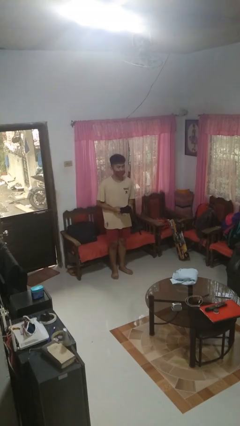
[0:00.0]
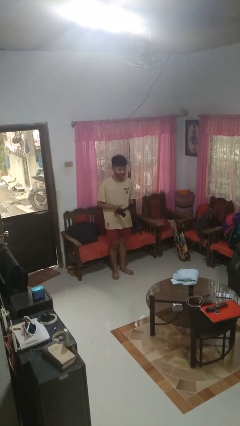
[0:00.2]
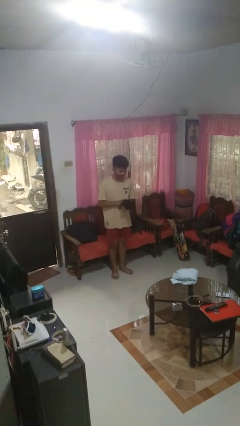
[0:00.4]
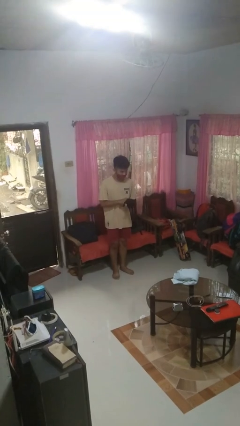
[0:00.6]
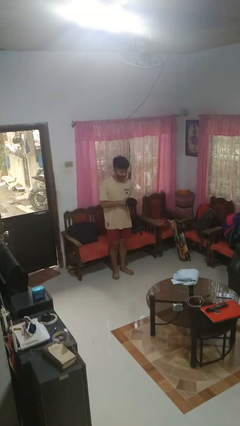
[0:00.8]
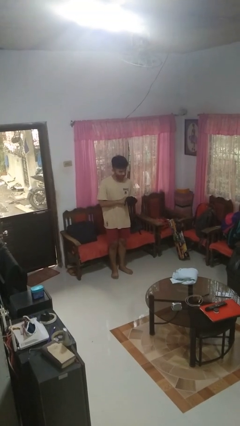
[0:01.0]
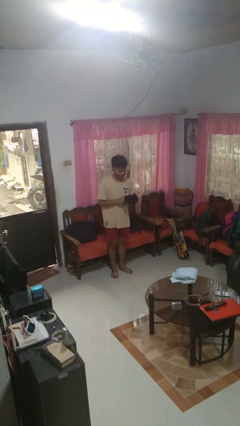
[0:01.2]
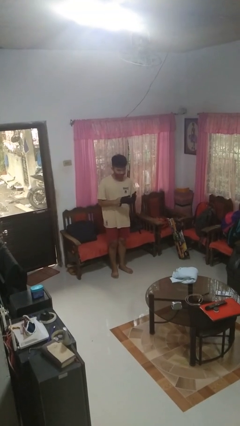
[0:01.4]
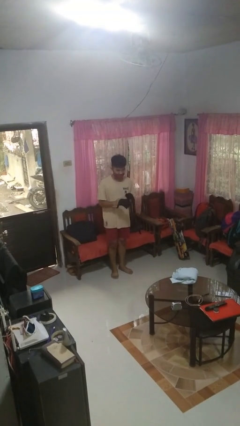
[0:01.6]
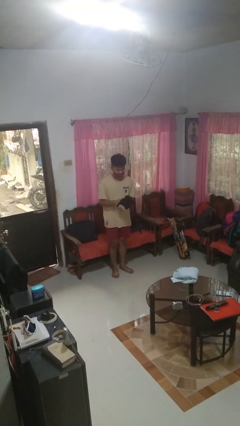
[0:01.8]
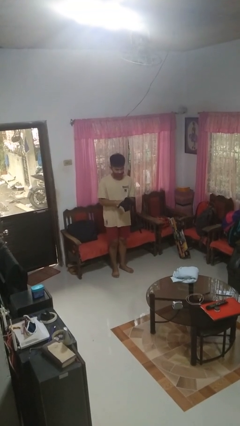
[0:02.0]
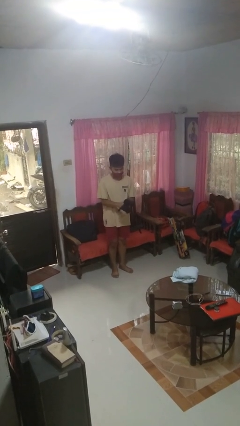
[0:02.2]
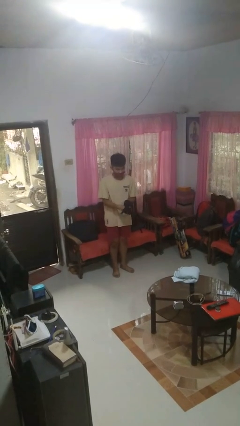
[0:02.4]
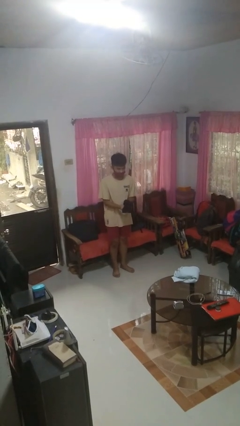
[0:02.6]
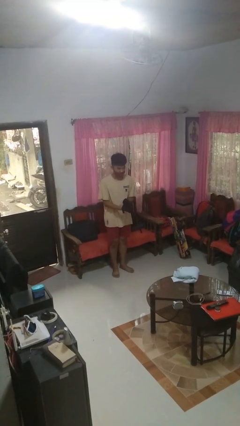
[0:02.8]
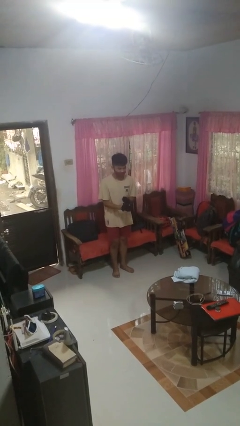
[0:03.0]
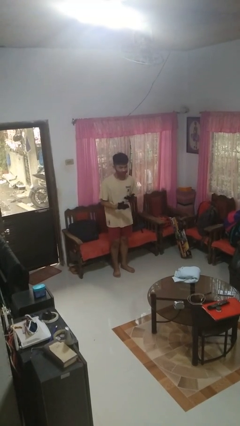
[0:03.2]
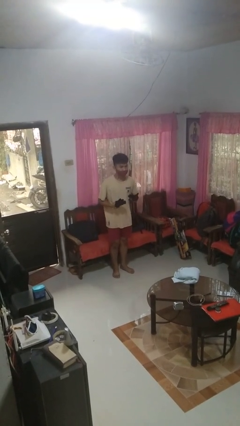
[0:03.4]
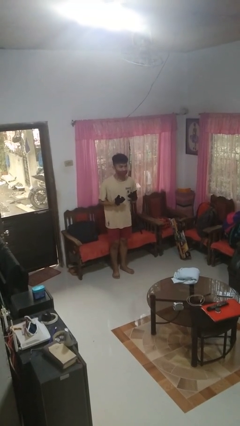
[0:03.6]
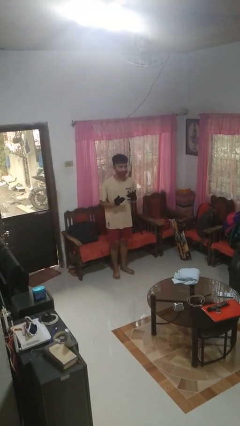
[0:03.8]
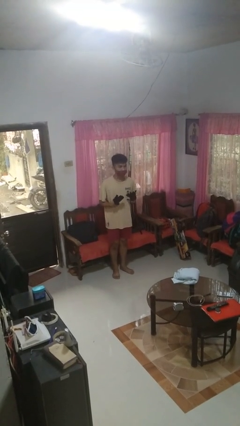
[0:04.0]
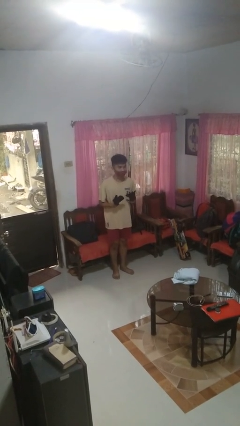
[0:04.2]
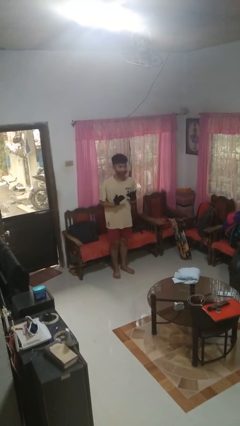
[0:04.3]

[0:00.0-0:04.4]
person puts on gloves

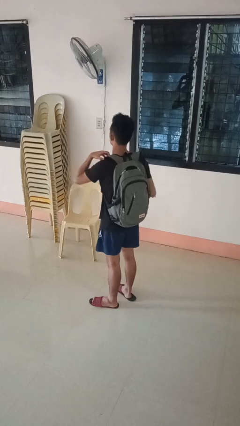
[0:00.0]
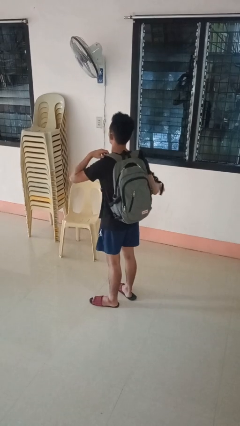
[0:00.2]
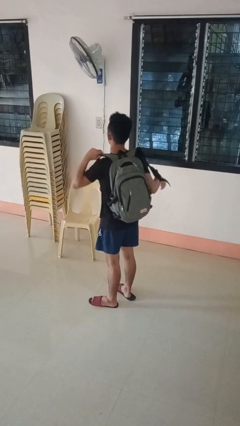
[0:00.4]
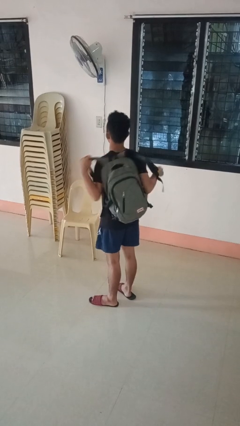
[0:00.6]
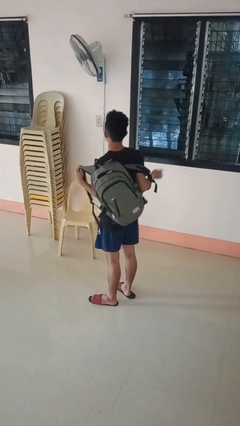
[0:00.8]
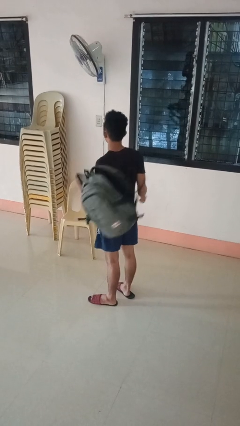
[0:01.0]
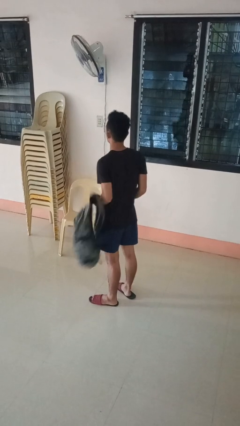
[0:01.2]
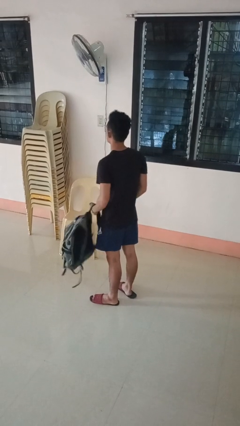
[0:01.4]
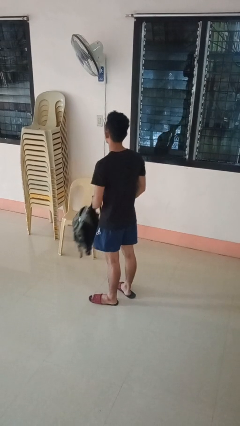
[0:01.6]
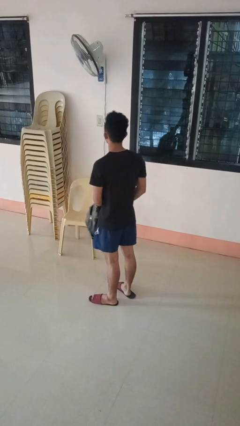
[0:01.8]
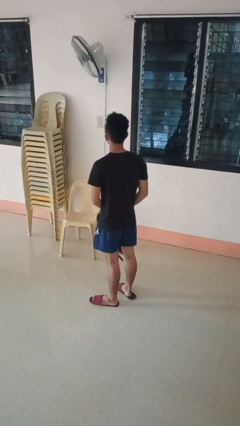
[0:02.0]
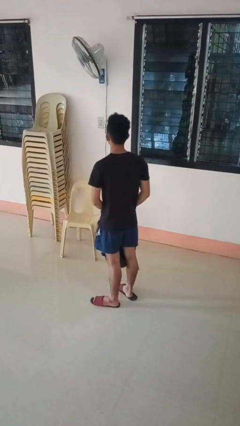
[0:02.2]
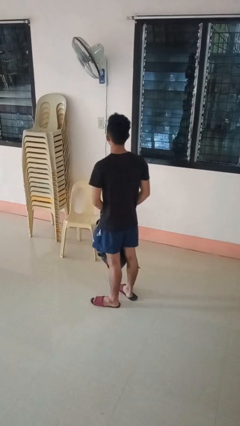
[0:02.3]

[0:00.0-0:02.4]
person takes off backpack

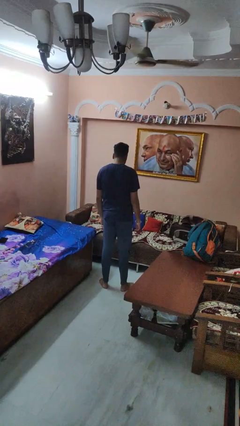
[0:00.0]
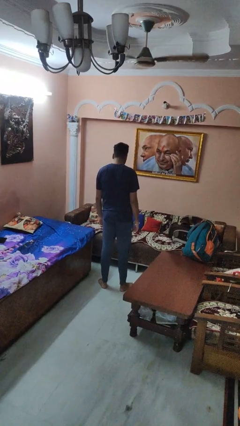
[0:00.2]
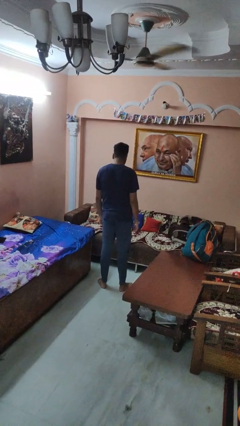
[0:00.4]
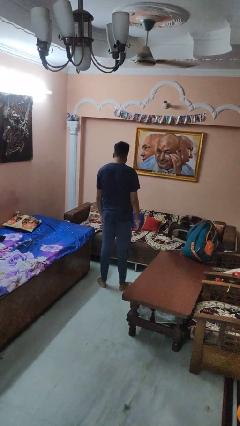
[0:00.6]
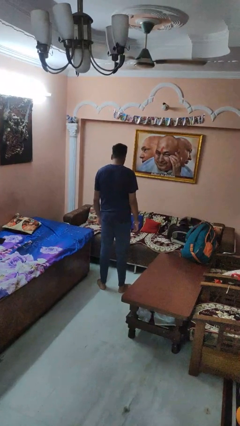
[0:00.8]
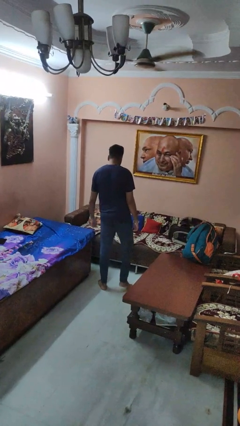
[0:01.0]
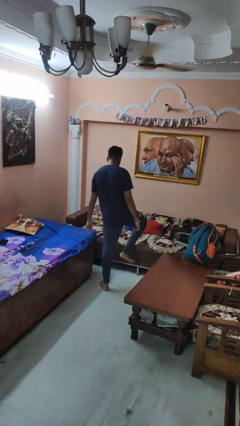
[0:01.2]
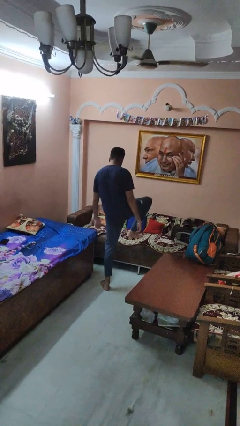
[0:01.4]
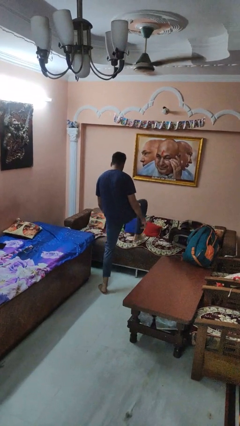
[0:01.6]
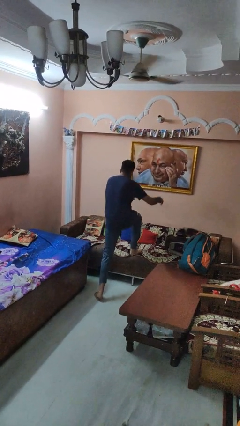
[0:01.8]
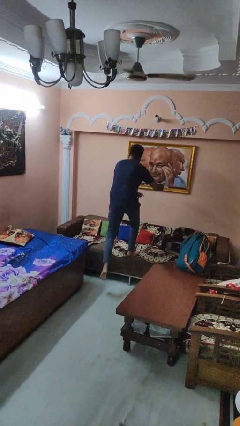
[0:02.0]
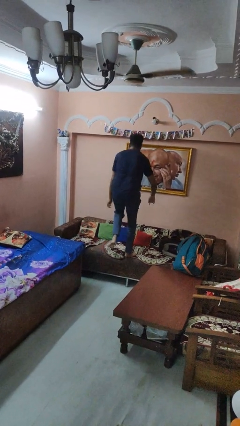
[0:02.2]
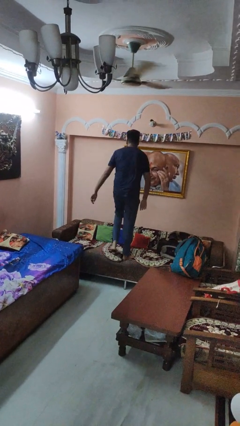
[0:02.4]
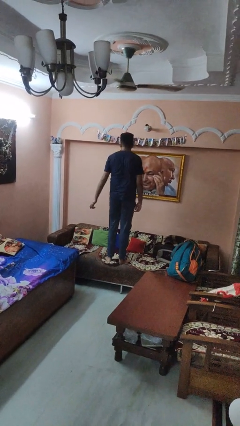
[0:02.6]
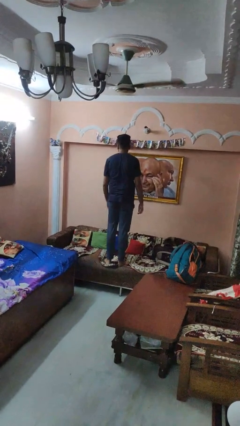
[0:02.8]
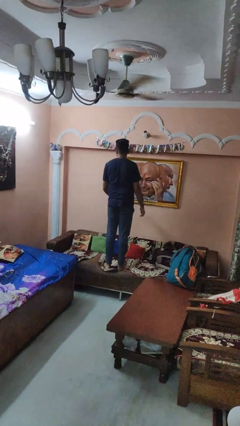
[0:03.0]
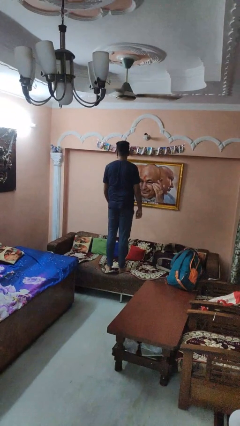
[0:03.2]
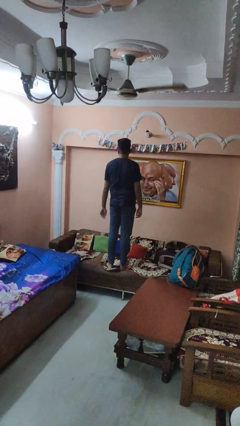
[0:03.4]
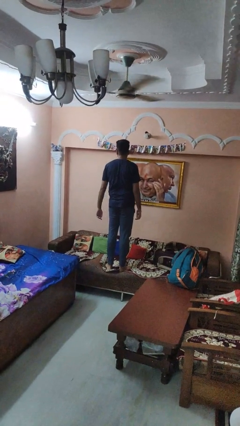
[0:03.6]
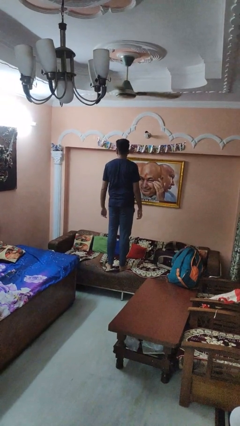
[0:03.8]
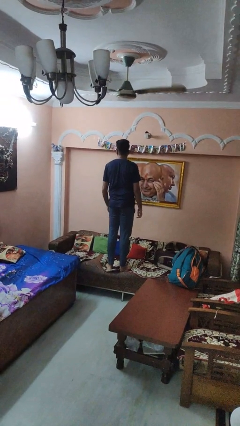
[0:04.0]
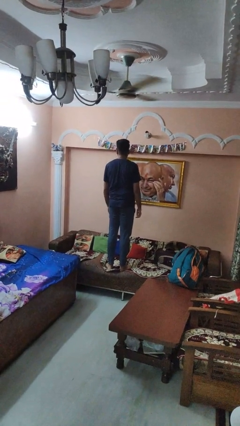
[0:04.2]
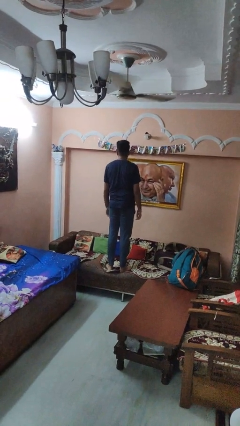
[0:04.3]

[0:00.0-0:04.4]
person climbs on couch

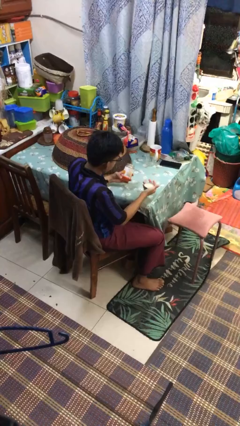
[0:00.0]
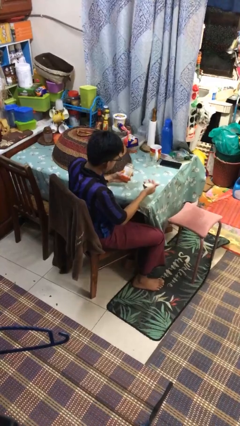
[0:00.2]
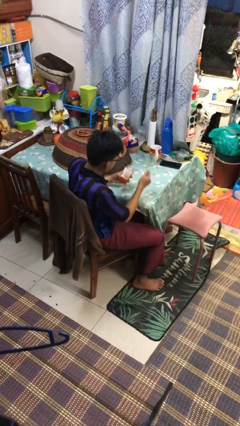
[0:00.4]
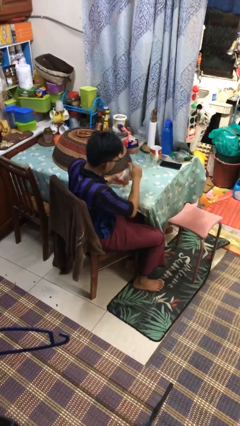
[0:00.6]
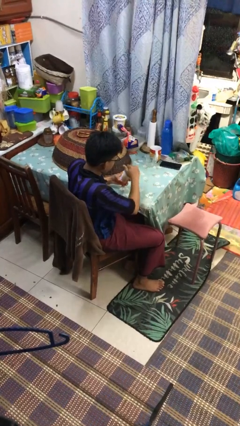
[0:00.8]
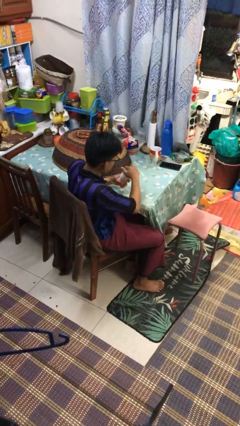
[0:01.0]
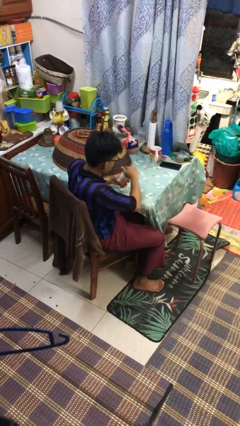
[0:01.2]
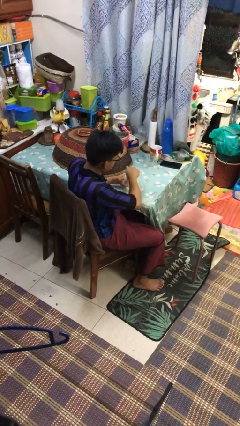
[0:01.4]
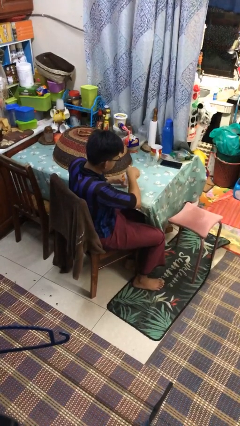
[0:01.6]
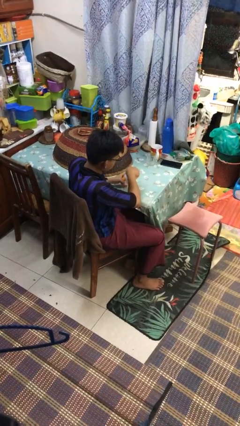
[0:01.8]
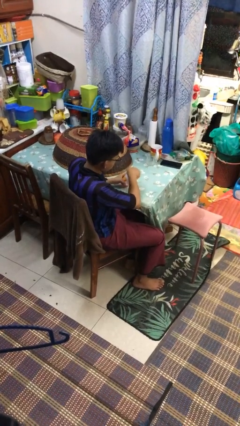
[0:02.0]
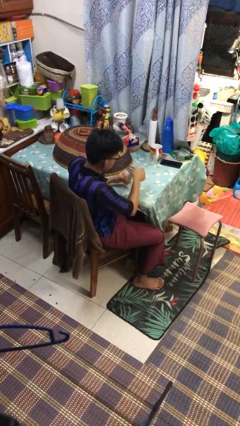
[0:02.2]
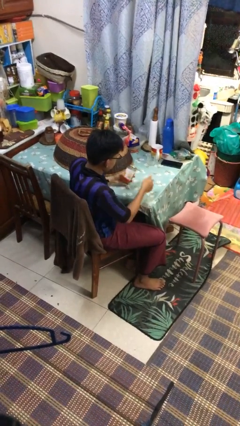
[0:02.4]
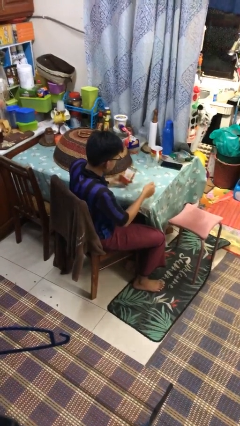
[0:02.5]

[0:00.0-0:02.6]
person closes jar

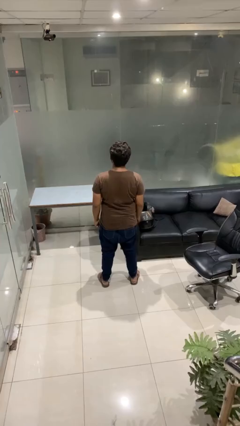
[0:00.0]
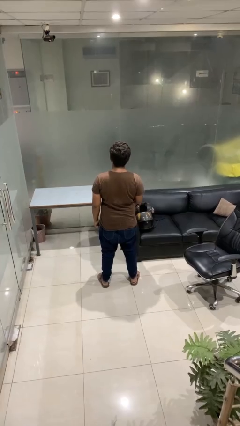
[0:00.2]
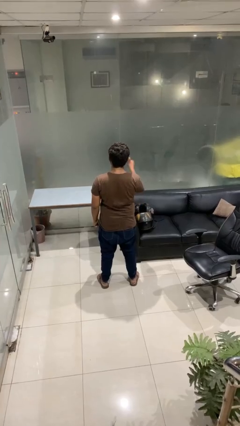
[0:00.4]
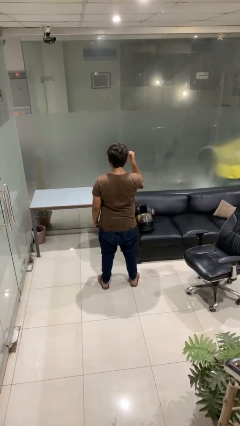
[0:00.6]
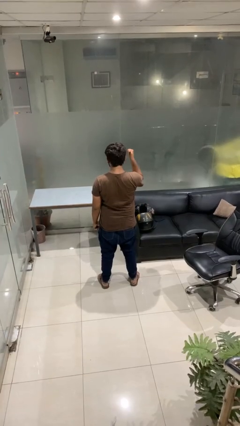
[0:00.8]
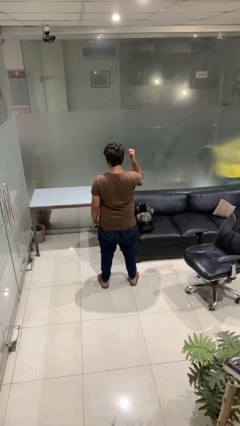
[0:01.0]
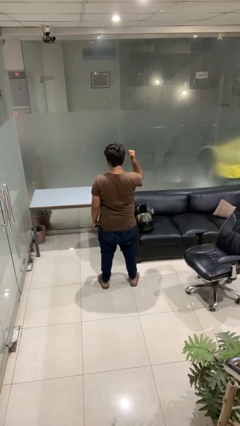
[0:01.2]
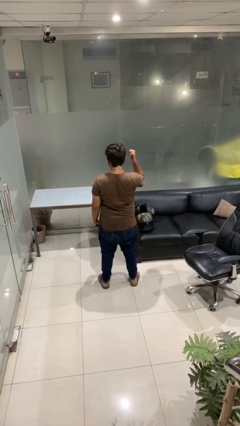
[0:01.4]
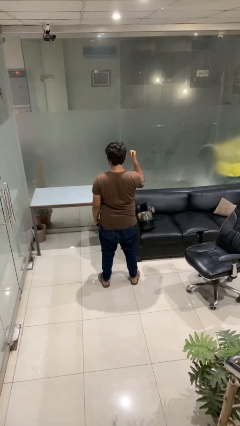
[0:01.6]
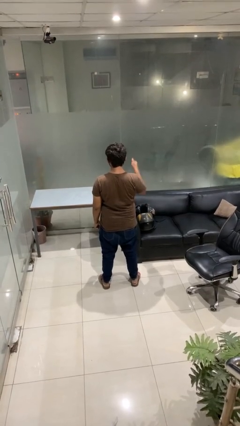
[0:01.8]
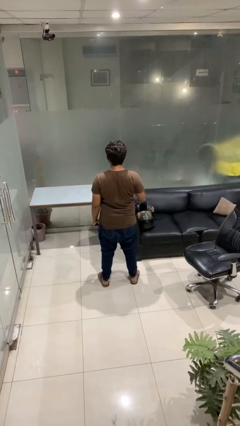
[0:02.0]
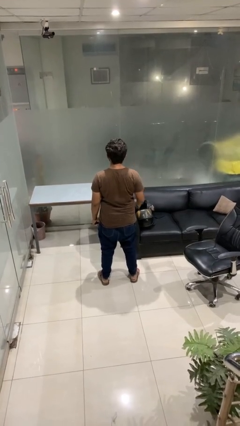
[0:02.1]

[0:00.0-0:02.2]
person gestures behind me

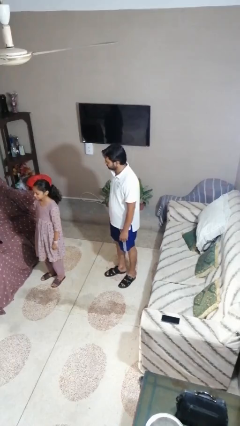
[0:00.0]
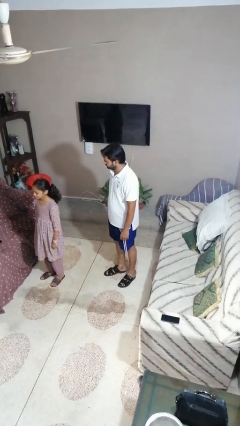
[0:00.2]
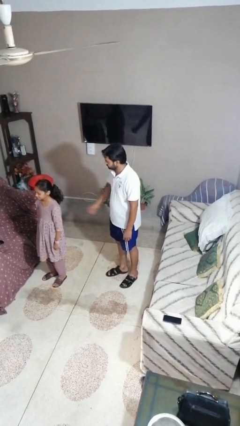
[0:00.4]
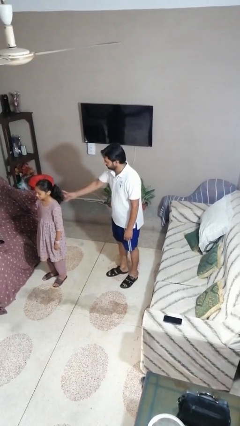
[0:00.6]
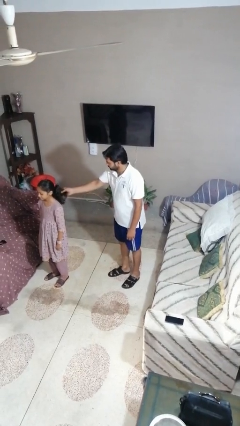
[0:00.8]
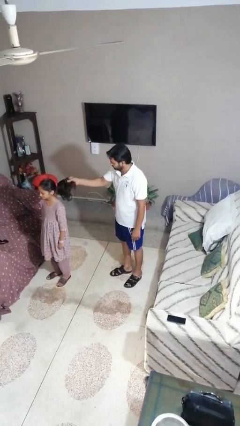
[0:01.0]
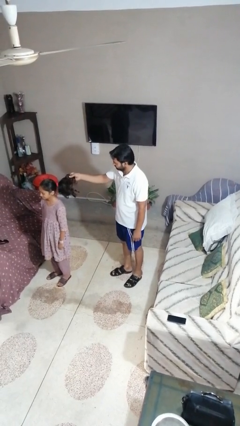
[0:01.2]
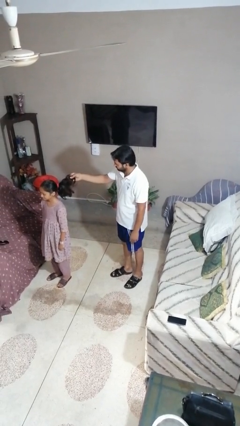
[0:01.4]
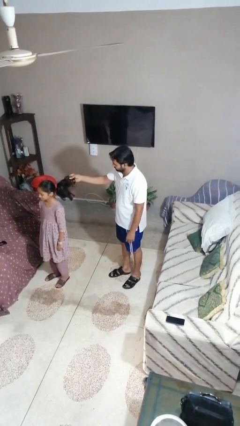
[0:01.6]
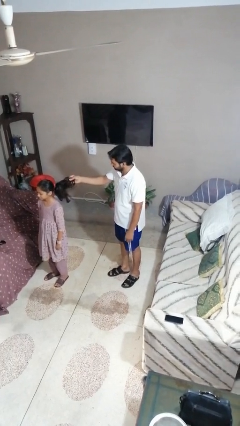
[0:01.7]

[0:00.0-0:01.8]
person grabs person by hair
